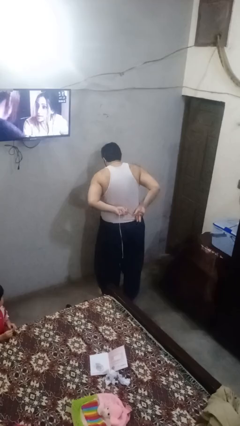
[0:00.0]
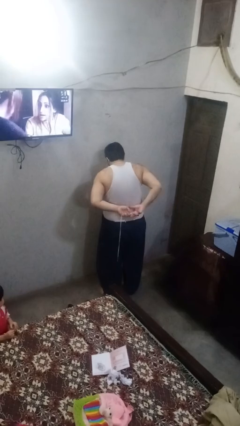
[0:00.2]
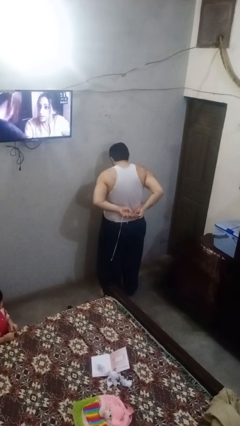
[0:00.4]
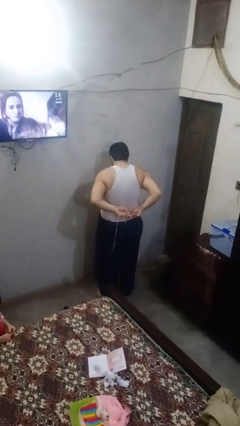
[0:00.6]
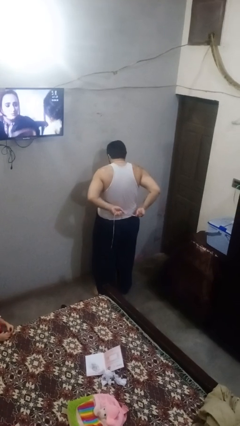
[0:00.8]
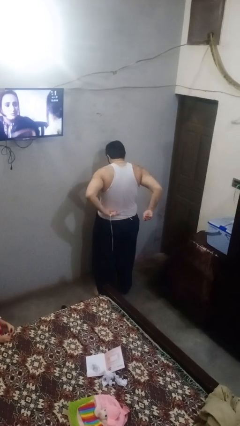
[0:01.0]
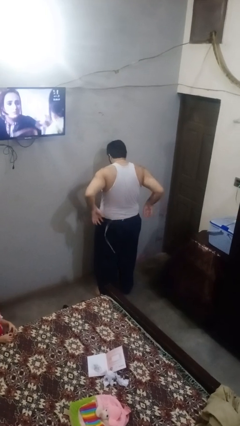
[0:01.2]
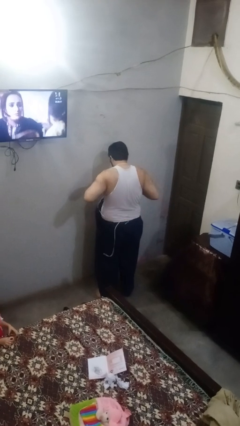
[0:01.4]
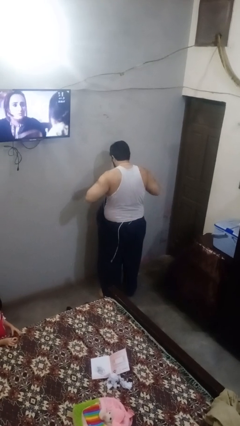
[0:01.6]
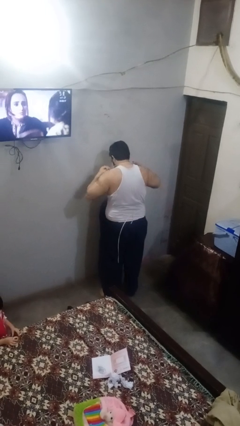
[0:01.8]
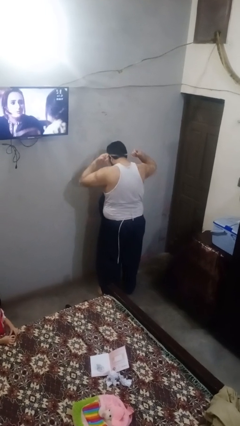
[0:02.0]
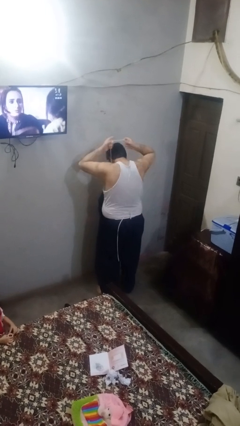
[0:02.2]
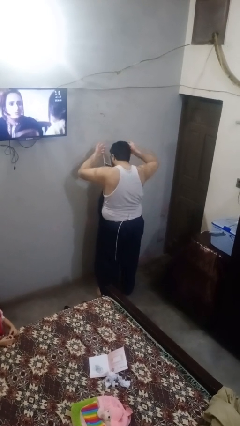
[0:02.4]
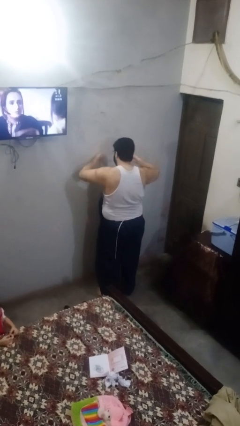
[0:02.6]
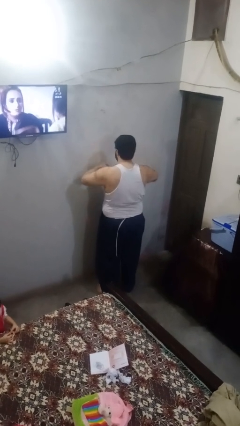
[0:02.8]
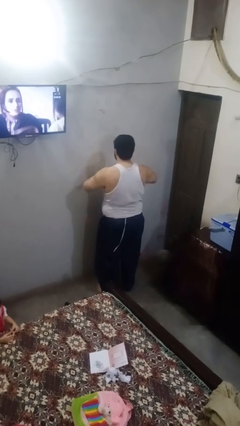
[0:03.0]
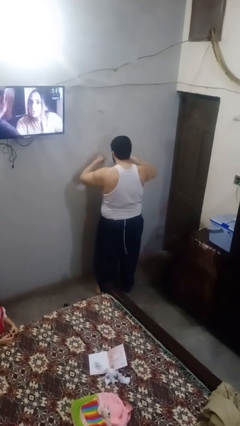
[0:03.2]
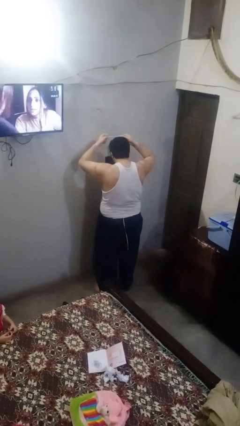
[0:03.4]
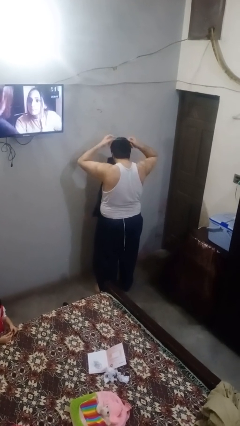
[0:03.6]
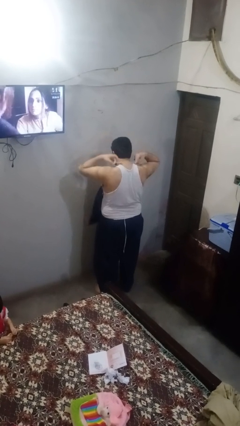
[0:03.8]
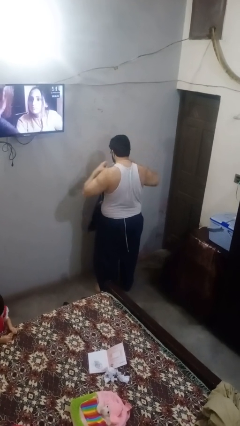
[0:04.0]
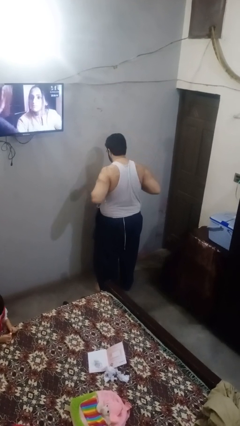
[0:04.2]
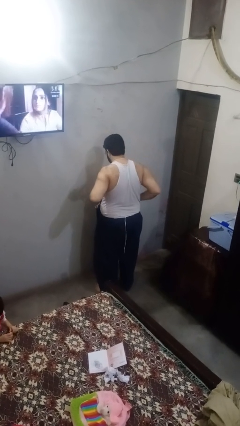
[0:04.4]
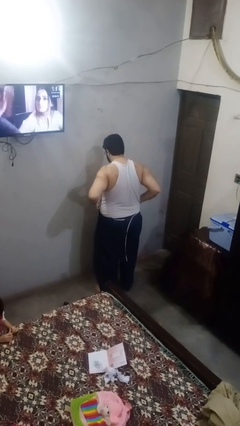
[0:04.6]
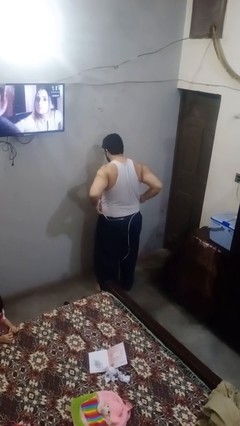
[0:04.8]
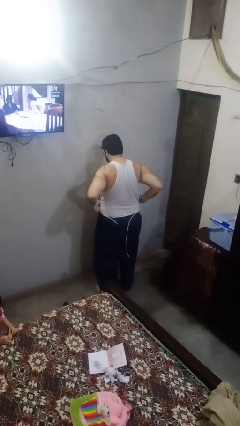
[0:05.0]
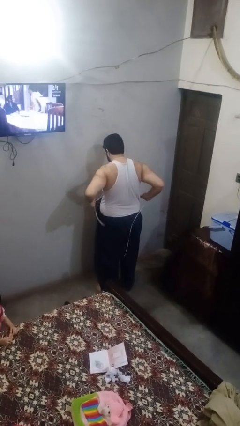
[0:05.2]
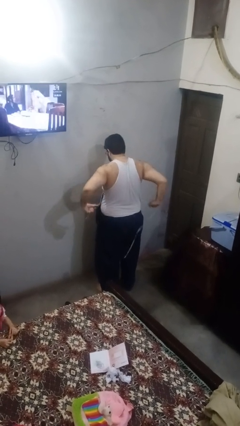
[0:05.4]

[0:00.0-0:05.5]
person takes off apron

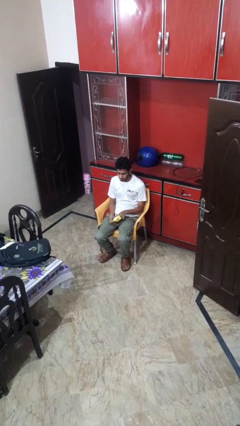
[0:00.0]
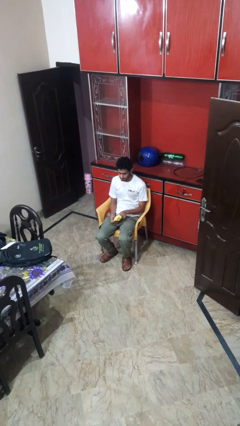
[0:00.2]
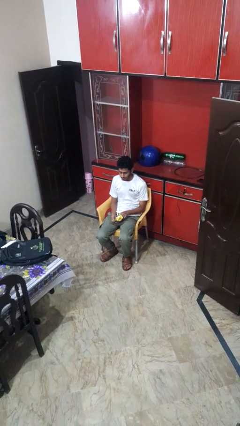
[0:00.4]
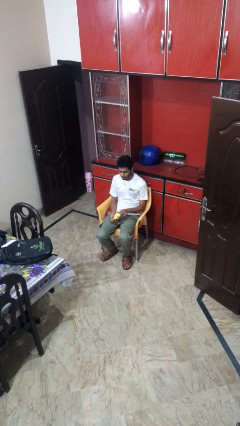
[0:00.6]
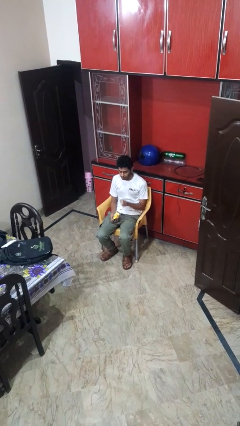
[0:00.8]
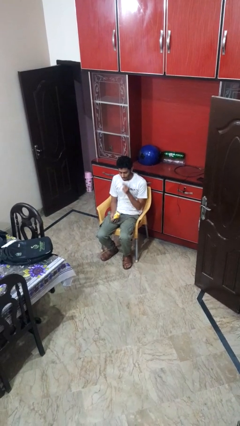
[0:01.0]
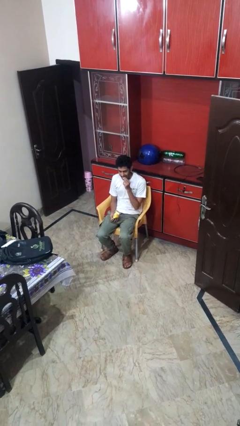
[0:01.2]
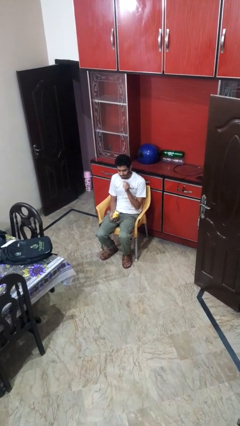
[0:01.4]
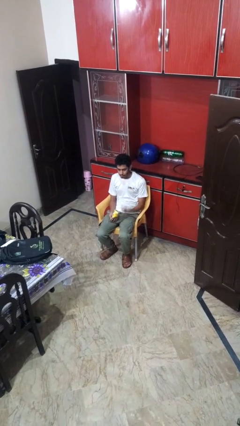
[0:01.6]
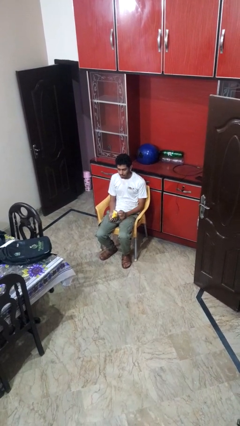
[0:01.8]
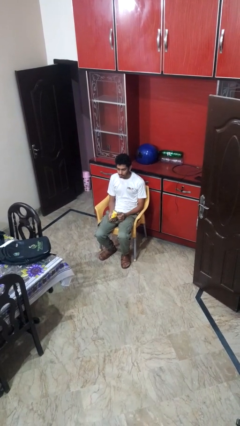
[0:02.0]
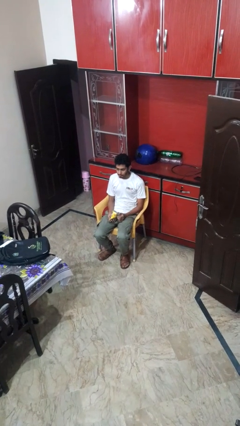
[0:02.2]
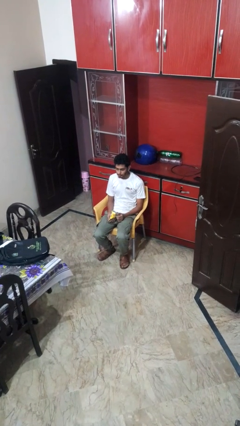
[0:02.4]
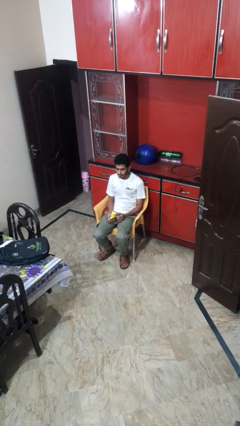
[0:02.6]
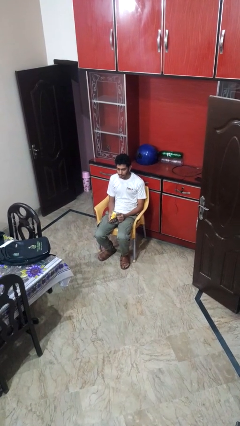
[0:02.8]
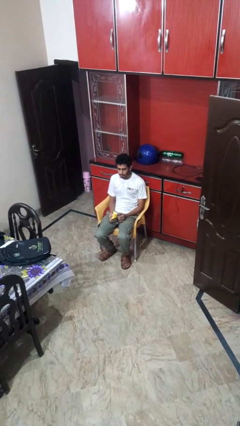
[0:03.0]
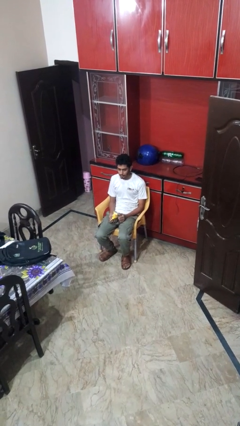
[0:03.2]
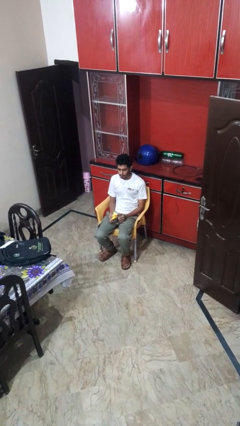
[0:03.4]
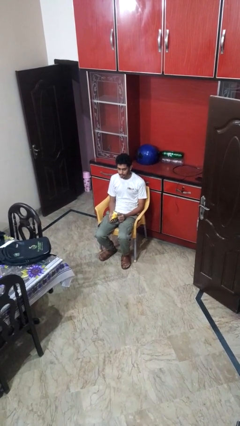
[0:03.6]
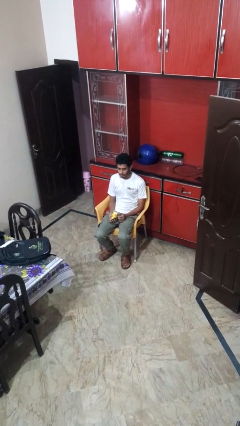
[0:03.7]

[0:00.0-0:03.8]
person eats snack from bag

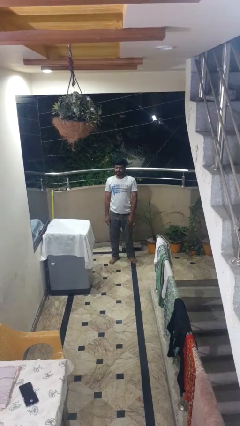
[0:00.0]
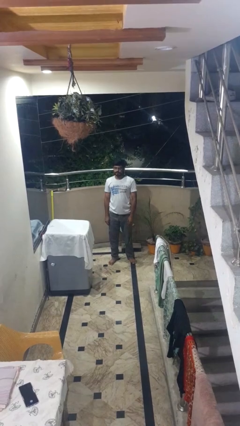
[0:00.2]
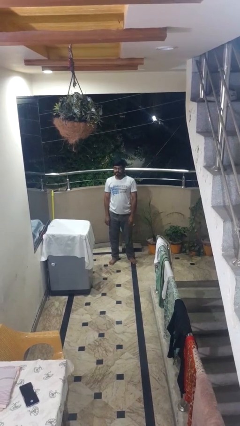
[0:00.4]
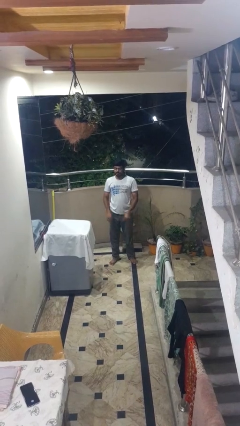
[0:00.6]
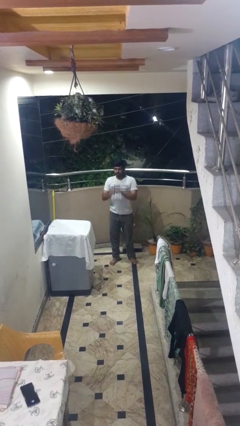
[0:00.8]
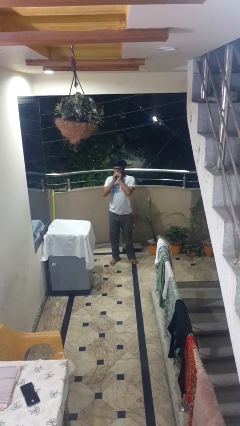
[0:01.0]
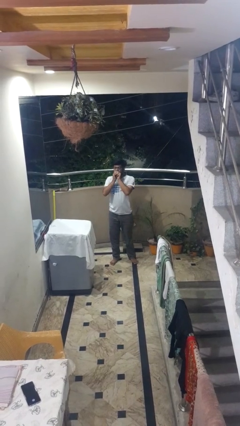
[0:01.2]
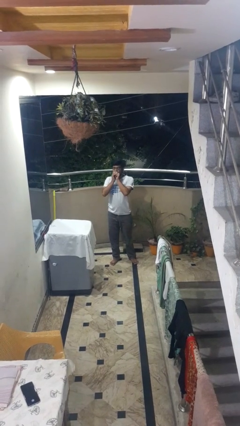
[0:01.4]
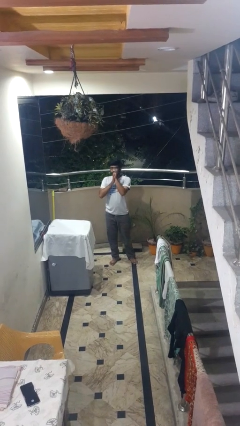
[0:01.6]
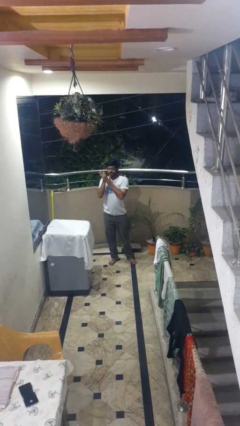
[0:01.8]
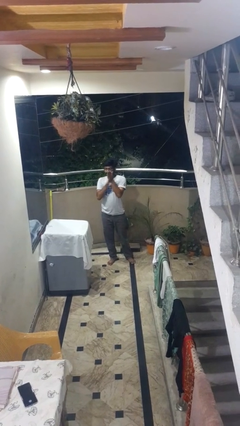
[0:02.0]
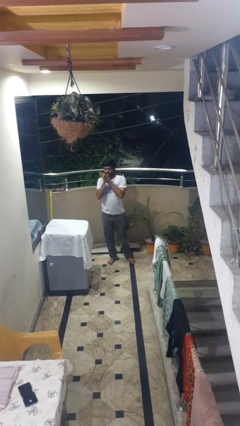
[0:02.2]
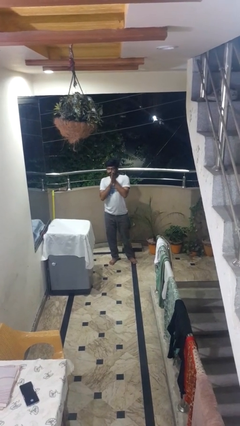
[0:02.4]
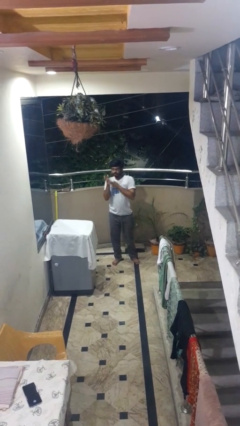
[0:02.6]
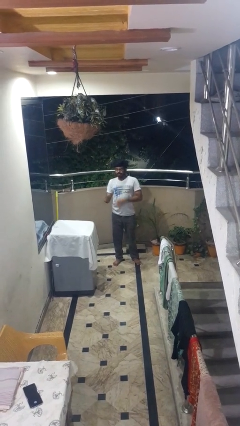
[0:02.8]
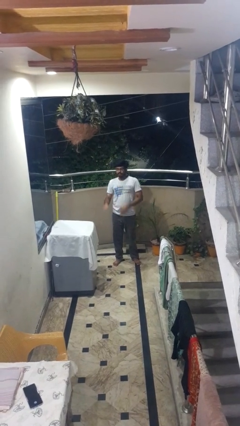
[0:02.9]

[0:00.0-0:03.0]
person blows into hands

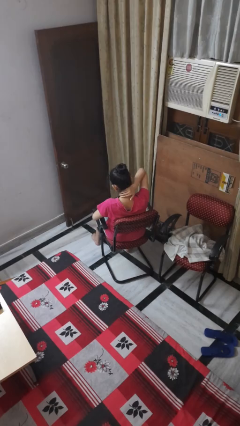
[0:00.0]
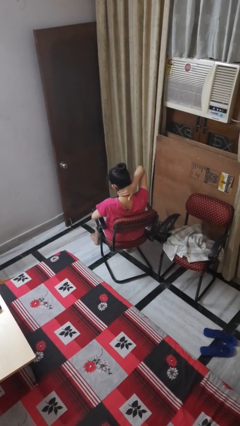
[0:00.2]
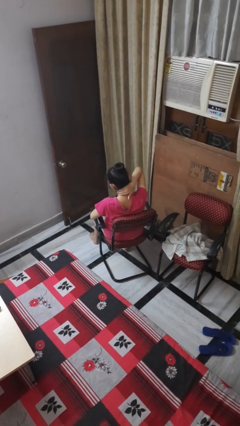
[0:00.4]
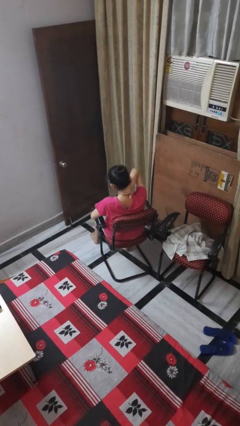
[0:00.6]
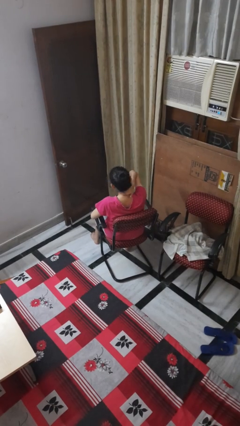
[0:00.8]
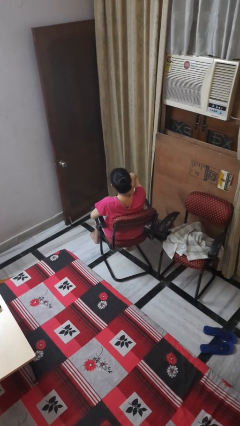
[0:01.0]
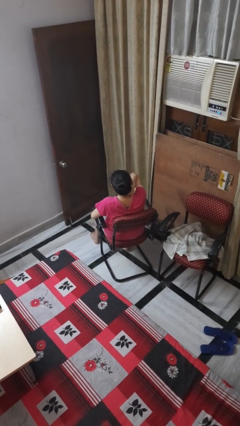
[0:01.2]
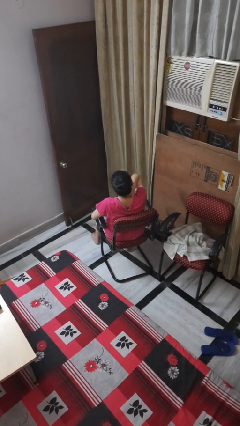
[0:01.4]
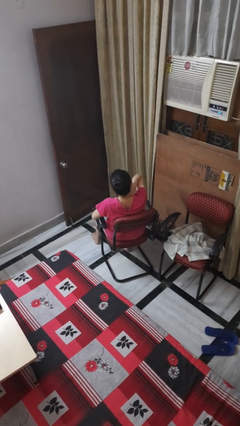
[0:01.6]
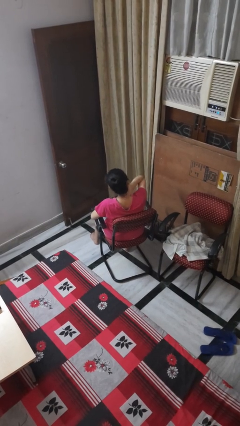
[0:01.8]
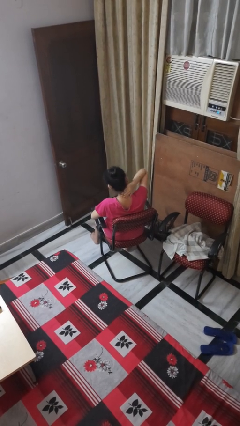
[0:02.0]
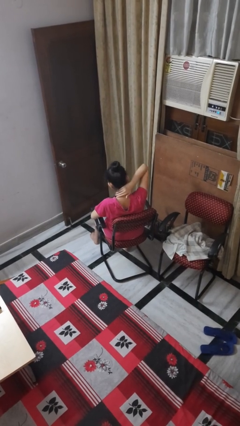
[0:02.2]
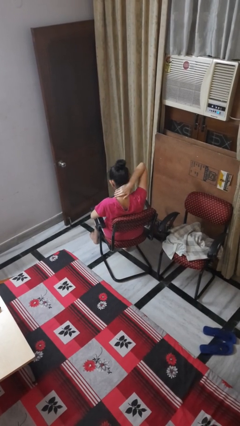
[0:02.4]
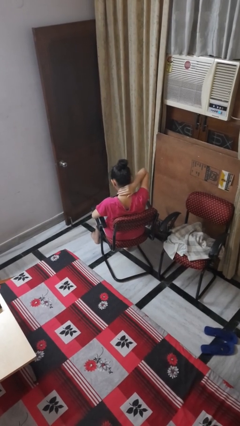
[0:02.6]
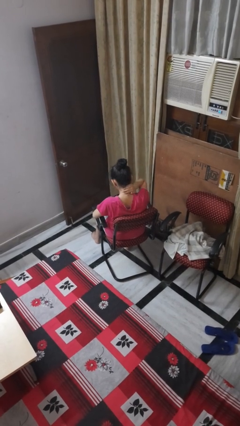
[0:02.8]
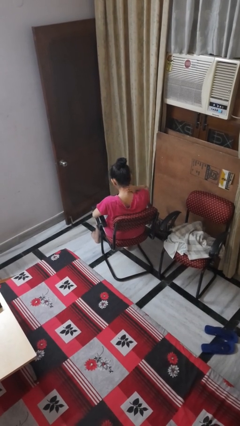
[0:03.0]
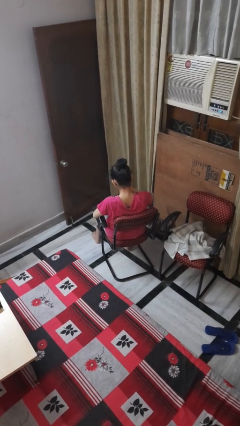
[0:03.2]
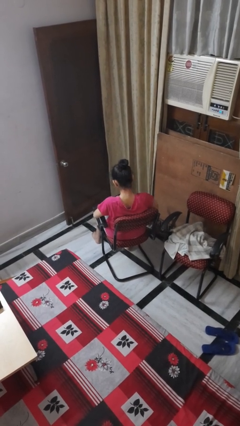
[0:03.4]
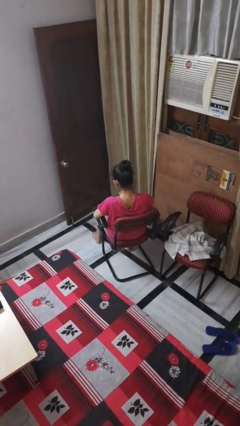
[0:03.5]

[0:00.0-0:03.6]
person rubs neck

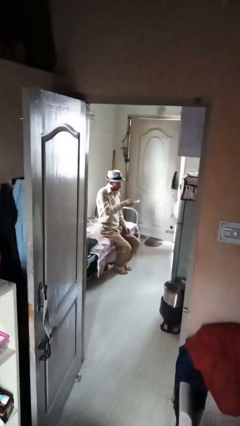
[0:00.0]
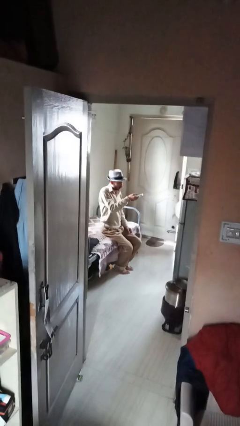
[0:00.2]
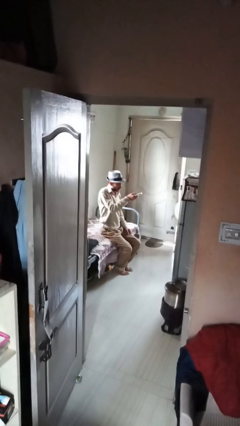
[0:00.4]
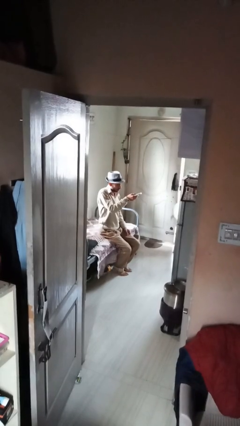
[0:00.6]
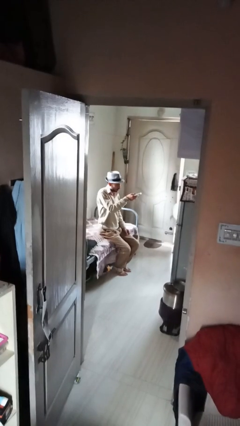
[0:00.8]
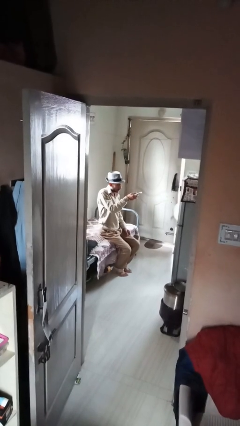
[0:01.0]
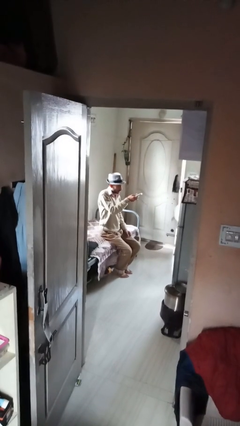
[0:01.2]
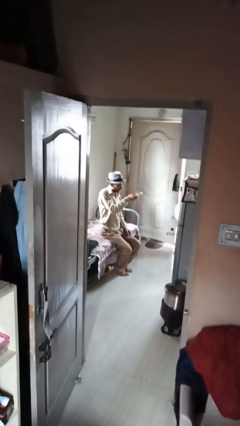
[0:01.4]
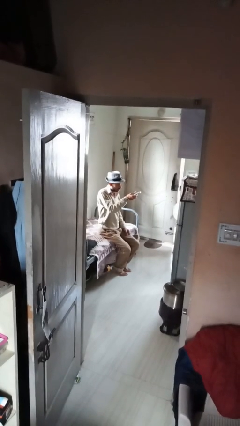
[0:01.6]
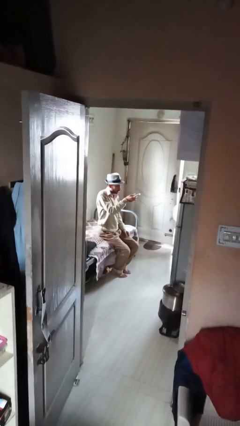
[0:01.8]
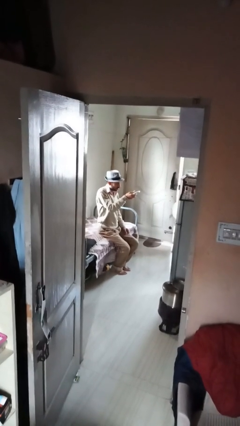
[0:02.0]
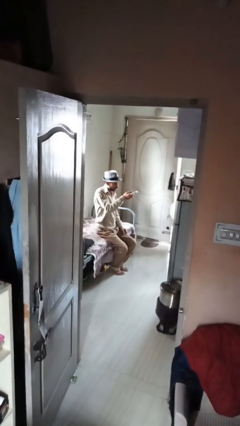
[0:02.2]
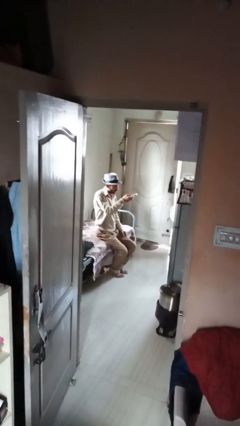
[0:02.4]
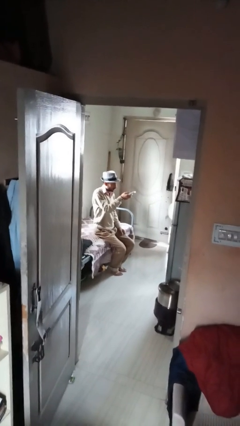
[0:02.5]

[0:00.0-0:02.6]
person uses television remote
